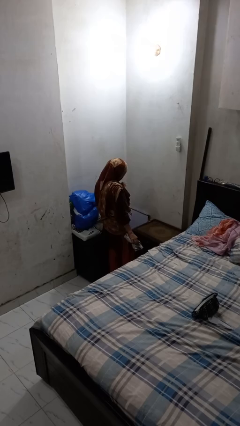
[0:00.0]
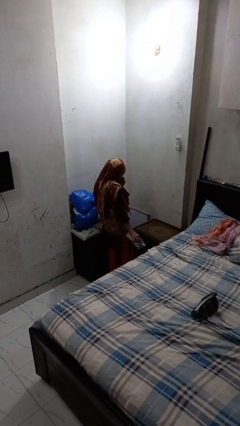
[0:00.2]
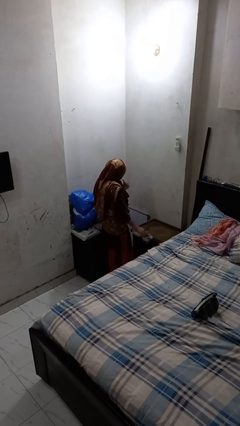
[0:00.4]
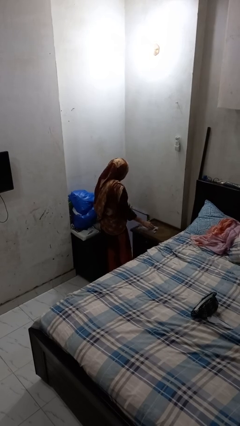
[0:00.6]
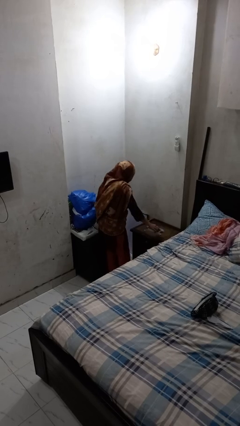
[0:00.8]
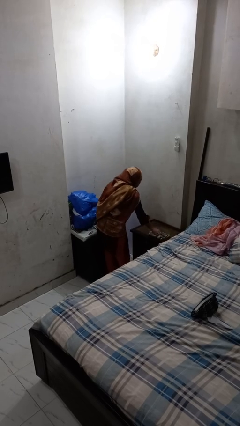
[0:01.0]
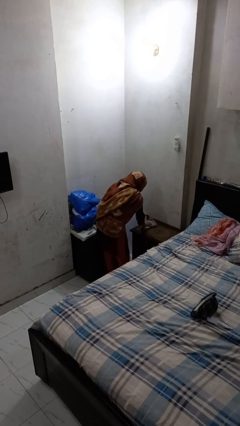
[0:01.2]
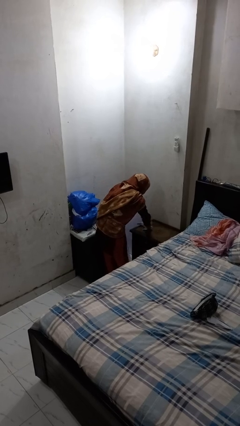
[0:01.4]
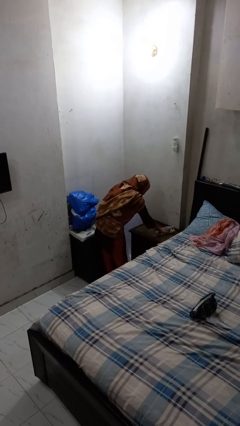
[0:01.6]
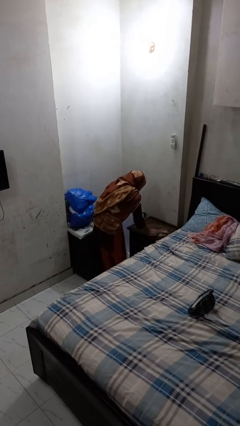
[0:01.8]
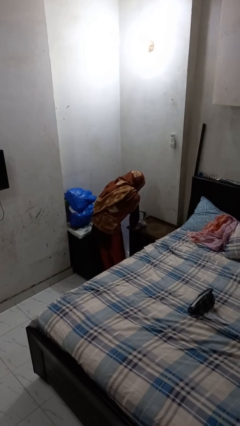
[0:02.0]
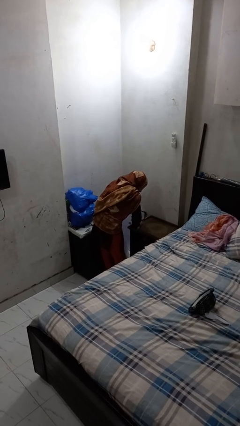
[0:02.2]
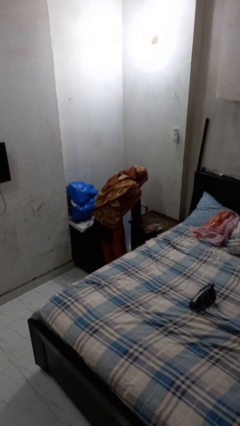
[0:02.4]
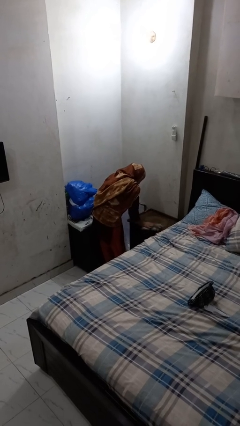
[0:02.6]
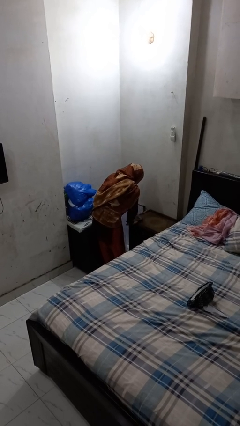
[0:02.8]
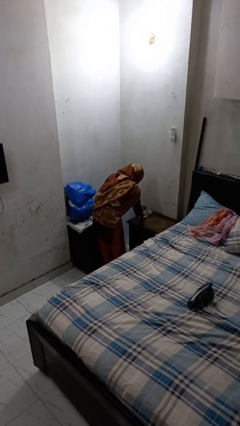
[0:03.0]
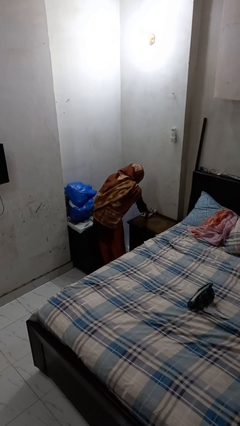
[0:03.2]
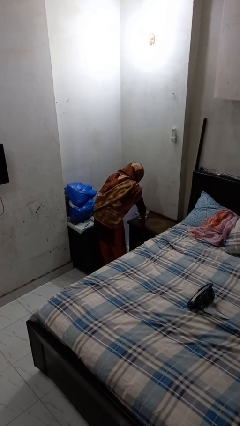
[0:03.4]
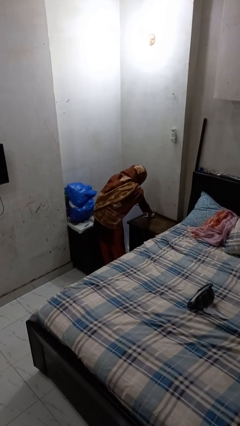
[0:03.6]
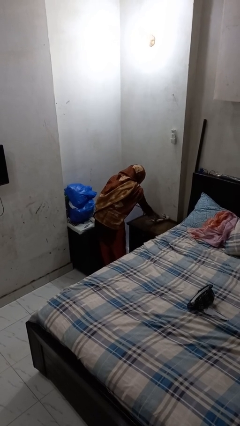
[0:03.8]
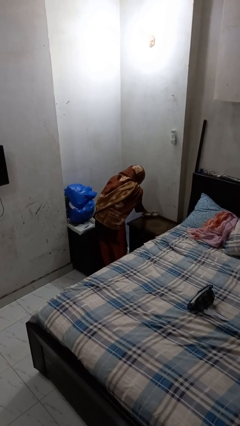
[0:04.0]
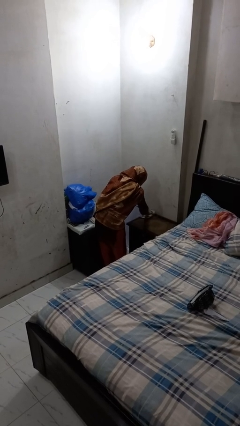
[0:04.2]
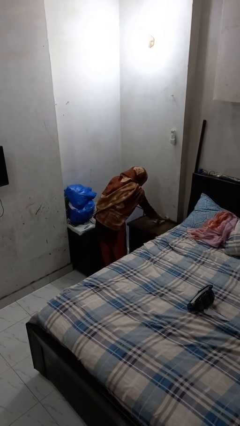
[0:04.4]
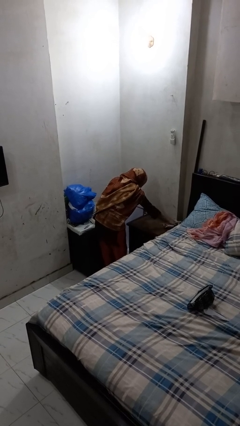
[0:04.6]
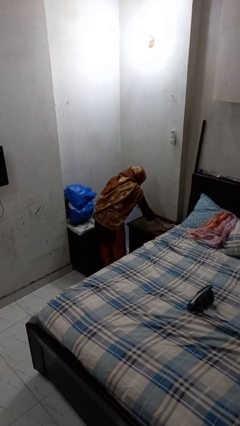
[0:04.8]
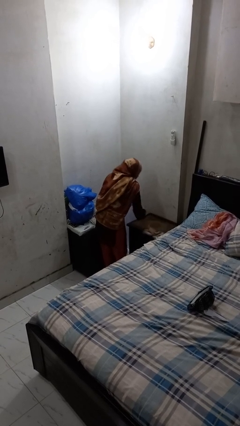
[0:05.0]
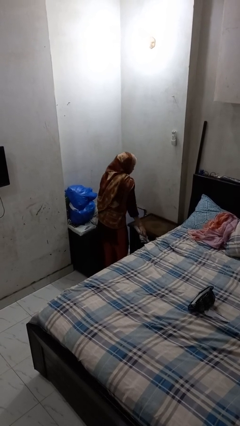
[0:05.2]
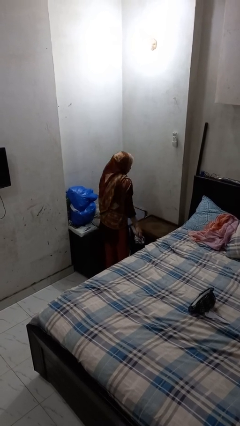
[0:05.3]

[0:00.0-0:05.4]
person cleans table with rag

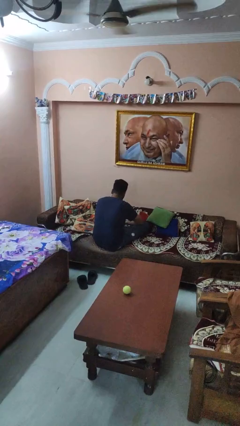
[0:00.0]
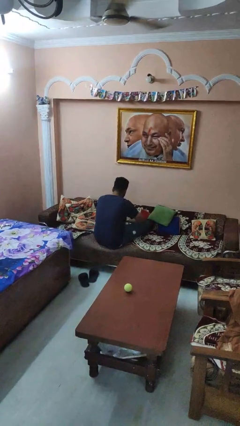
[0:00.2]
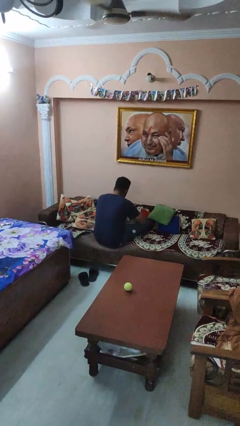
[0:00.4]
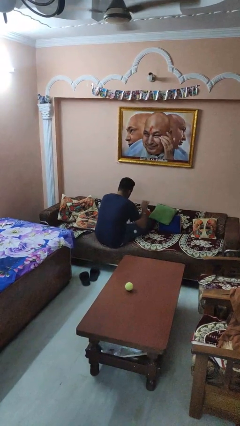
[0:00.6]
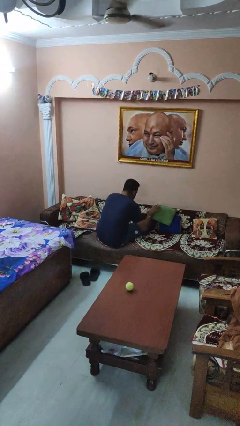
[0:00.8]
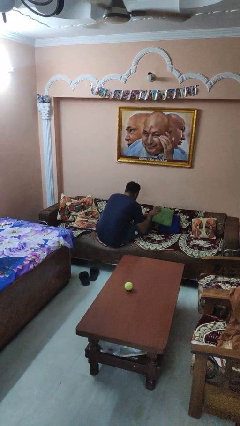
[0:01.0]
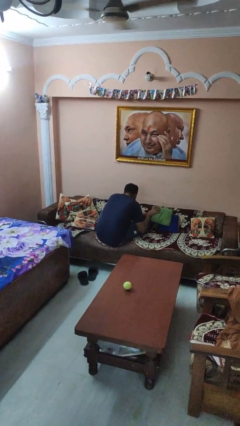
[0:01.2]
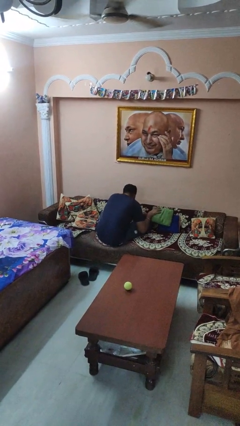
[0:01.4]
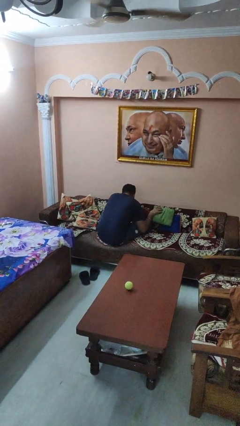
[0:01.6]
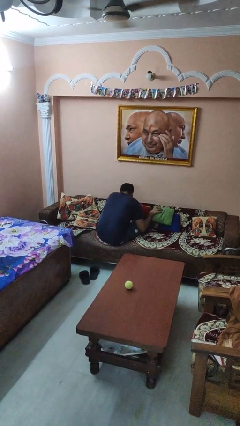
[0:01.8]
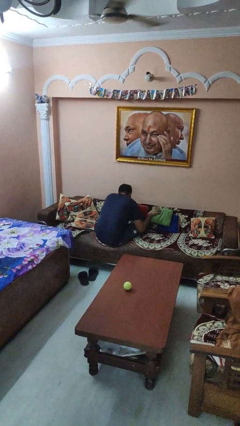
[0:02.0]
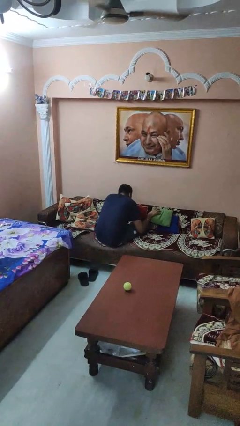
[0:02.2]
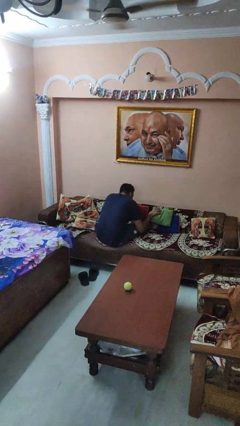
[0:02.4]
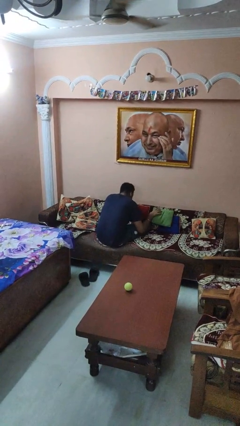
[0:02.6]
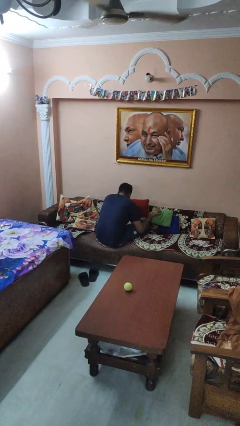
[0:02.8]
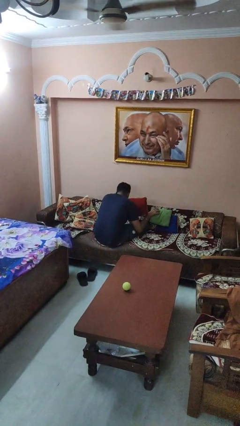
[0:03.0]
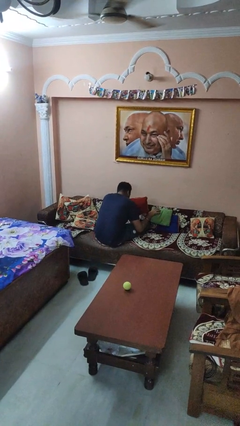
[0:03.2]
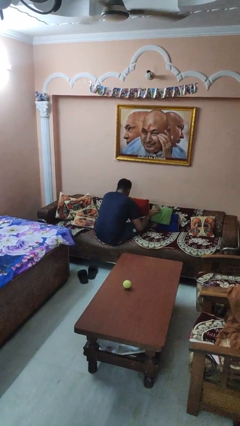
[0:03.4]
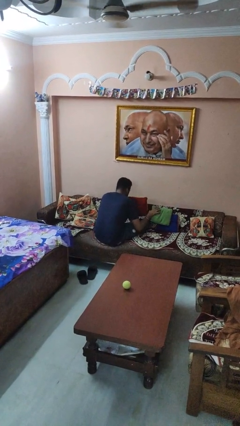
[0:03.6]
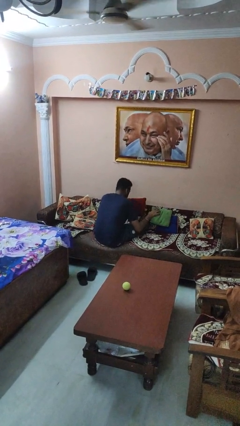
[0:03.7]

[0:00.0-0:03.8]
person searches in couch

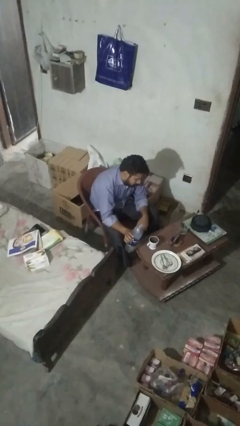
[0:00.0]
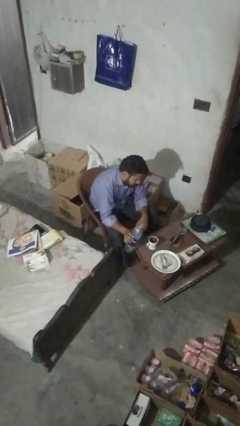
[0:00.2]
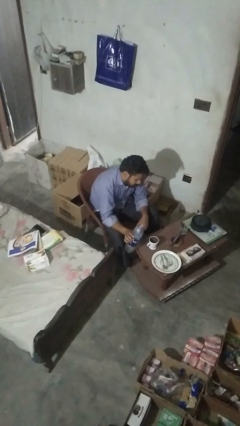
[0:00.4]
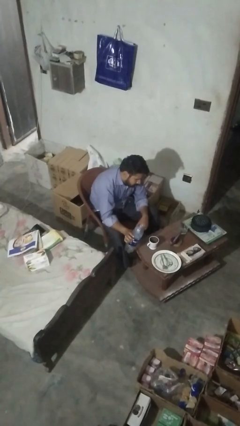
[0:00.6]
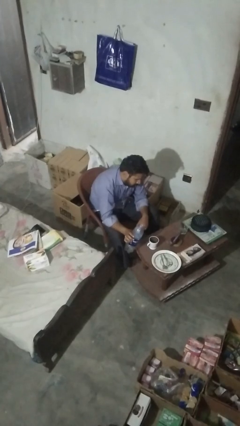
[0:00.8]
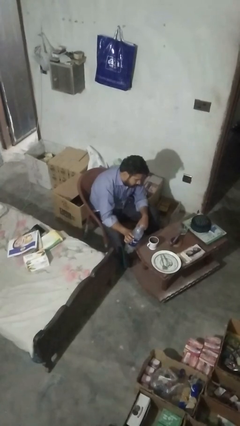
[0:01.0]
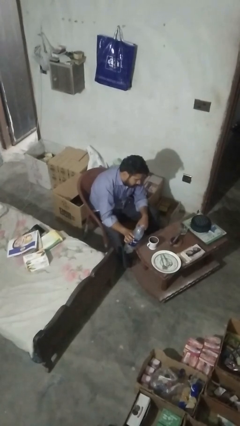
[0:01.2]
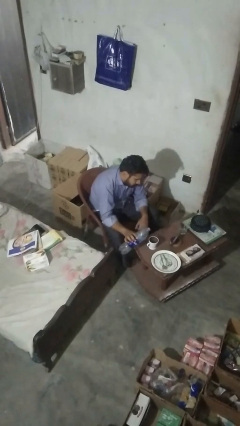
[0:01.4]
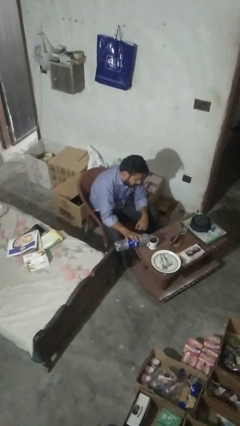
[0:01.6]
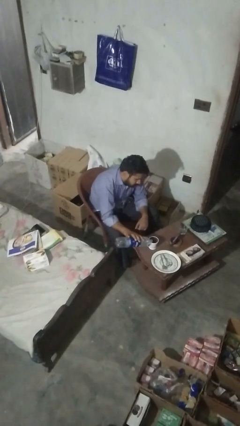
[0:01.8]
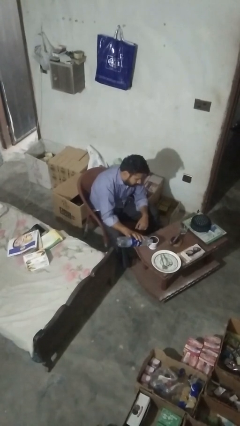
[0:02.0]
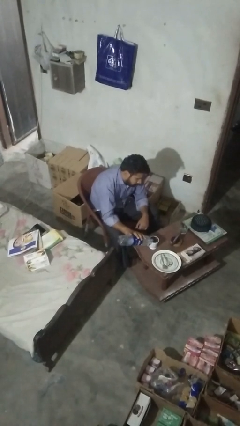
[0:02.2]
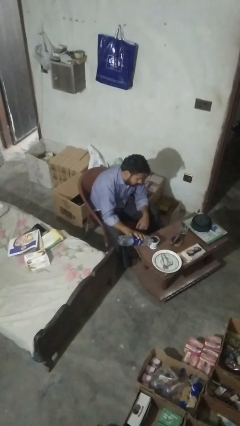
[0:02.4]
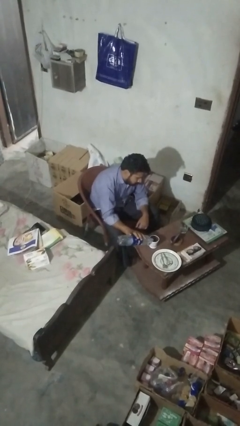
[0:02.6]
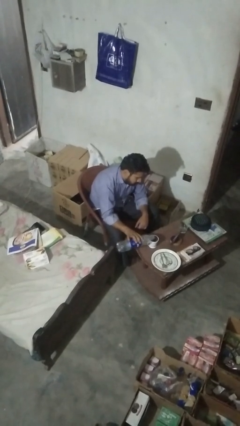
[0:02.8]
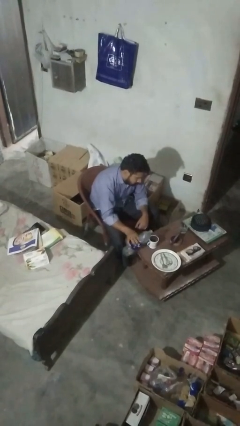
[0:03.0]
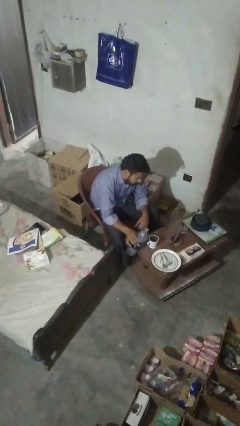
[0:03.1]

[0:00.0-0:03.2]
person pours liquid into cup

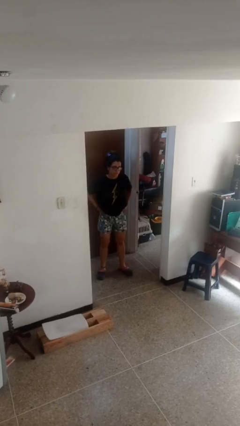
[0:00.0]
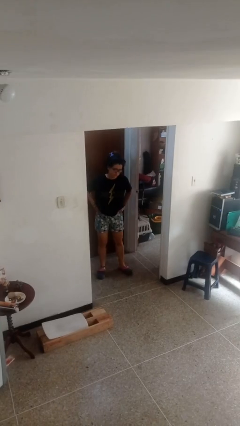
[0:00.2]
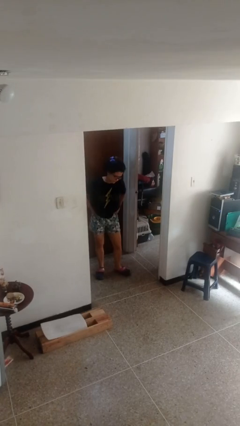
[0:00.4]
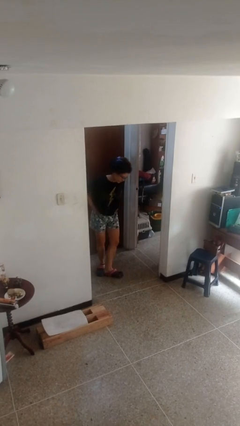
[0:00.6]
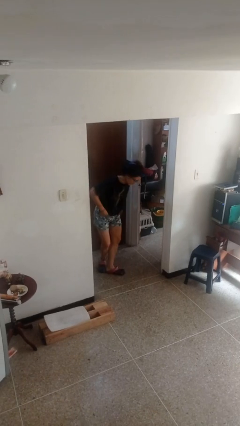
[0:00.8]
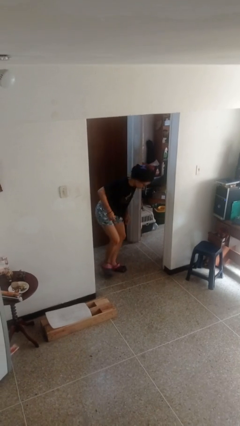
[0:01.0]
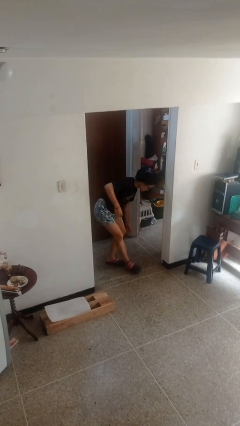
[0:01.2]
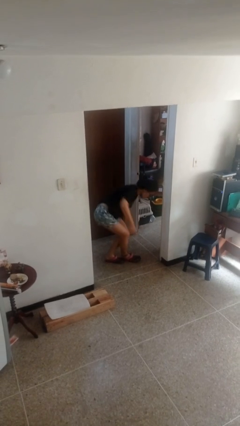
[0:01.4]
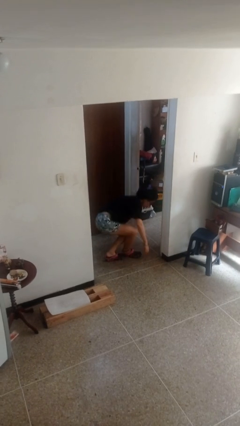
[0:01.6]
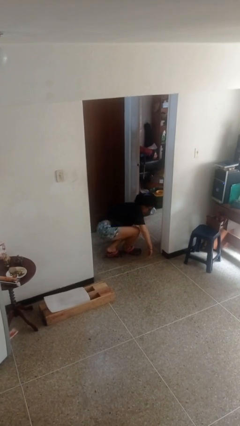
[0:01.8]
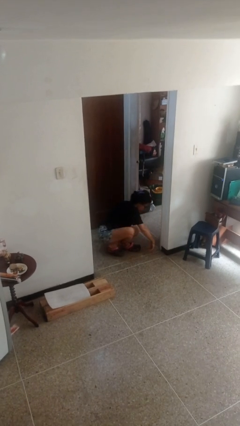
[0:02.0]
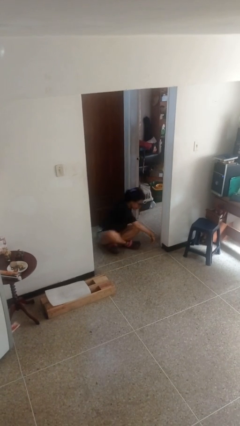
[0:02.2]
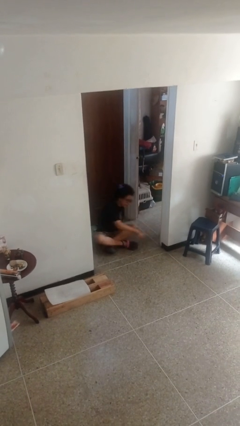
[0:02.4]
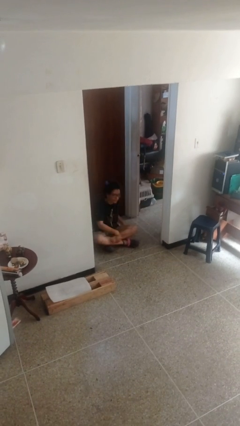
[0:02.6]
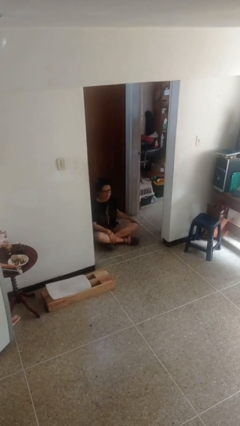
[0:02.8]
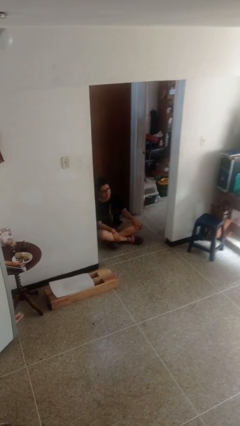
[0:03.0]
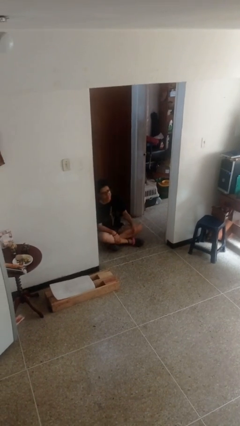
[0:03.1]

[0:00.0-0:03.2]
person sits crisscross

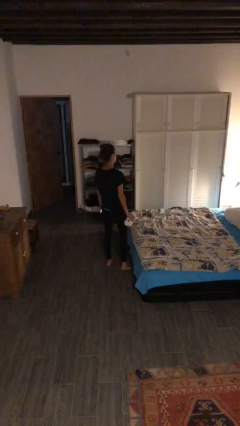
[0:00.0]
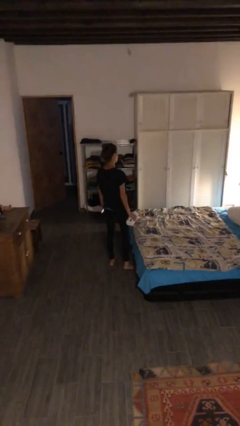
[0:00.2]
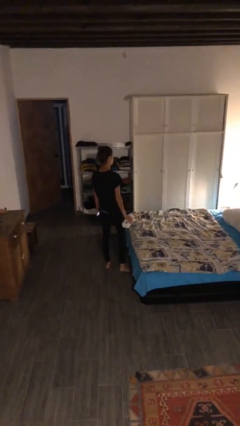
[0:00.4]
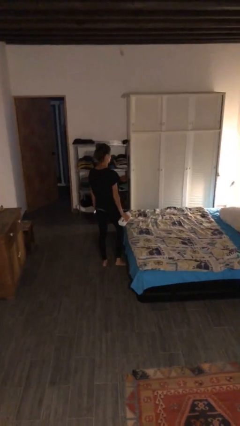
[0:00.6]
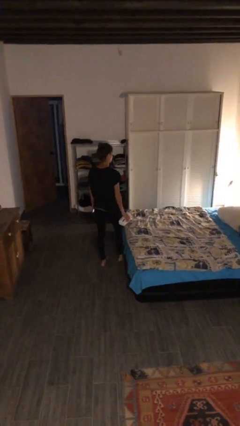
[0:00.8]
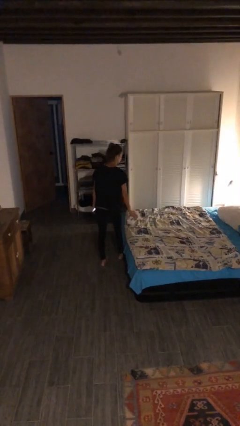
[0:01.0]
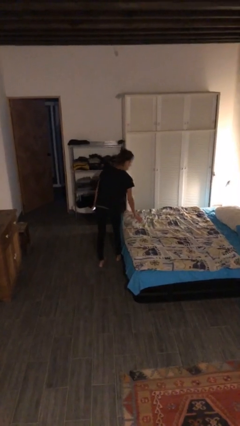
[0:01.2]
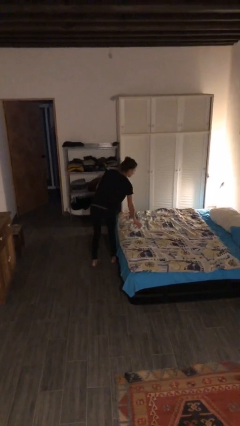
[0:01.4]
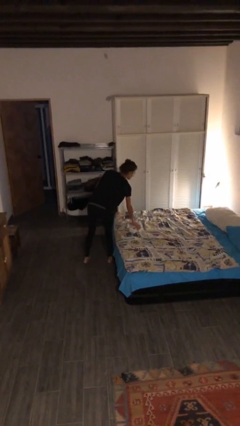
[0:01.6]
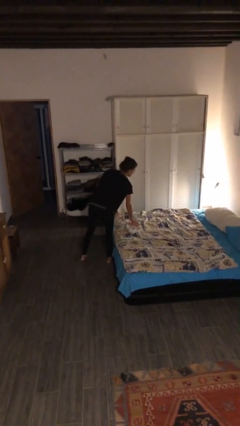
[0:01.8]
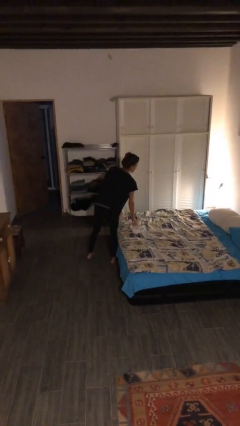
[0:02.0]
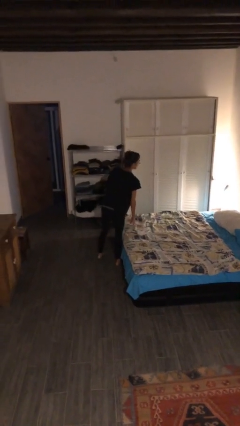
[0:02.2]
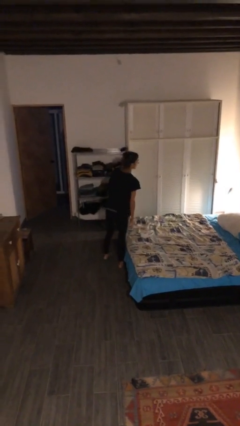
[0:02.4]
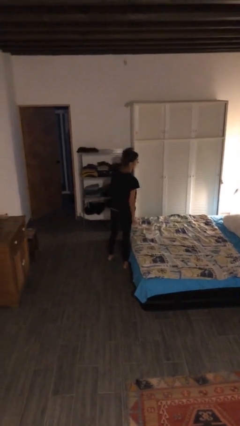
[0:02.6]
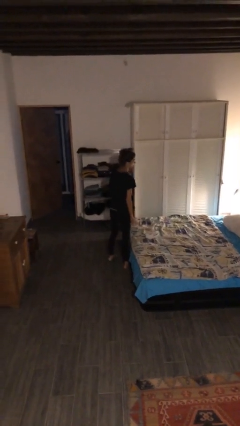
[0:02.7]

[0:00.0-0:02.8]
person puts down object on bed
